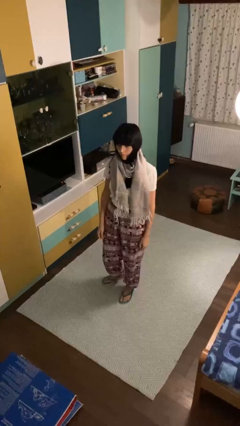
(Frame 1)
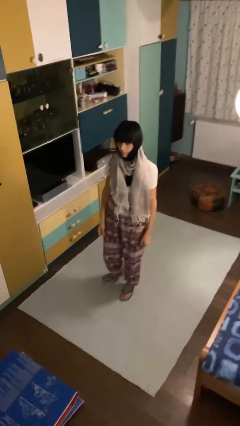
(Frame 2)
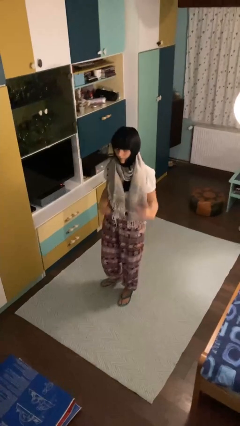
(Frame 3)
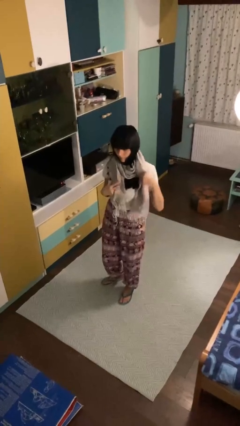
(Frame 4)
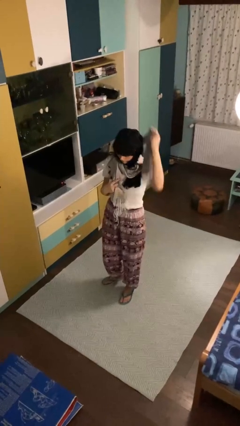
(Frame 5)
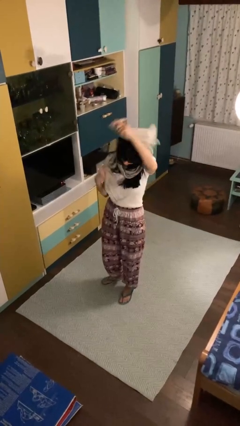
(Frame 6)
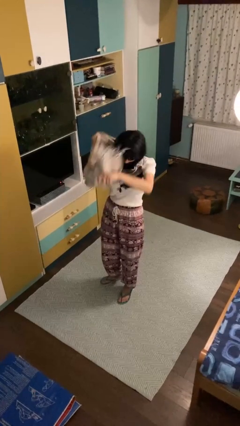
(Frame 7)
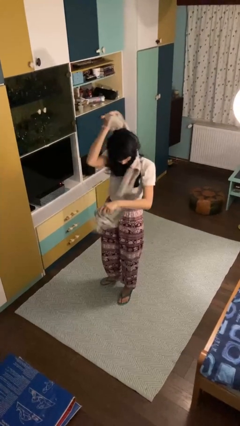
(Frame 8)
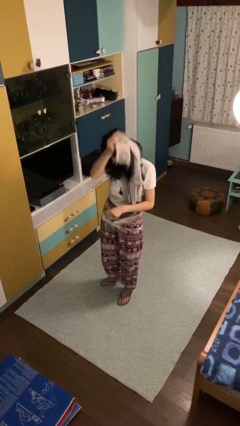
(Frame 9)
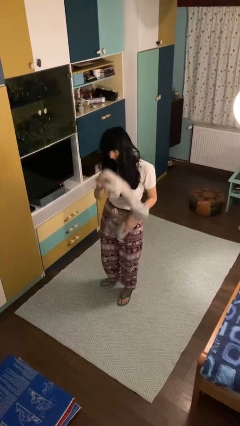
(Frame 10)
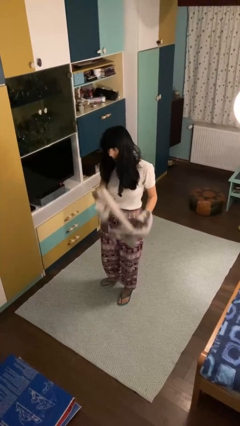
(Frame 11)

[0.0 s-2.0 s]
person takes off scarf

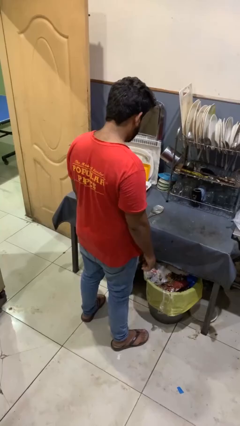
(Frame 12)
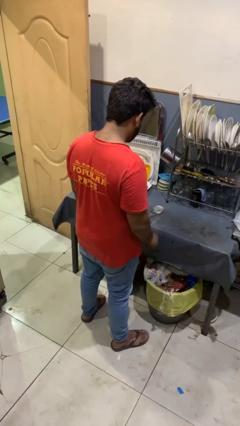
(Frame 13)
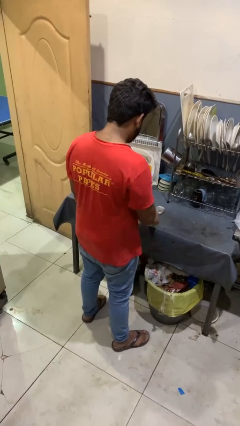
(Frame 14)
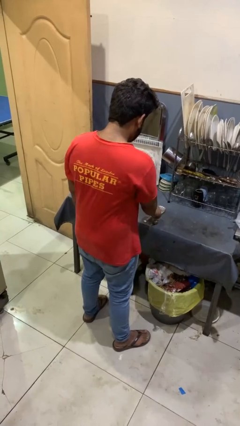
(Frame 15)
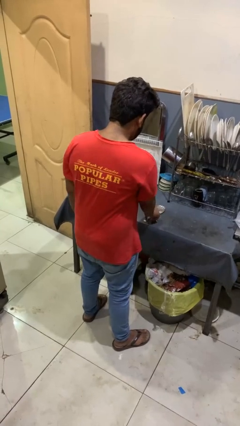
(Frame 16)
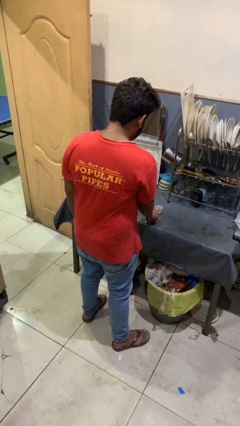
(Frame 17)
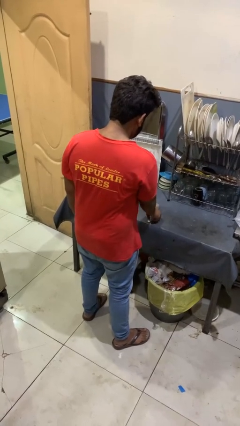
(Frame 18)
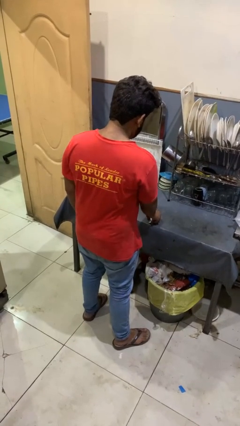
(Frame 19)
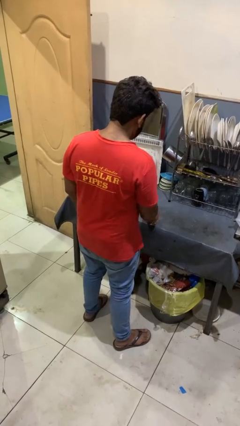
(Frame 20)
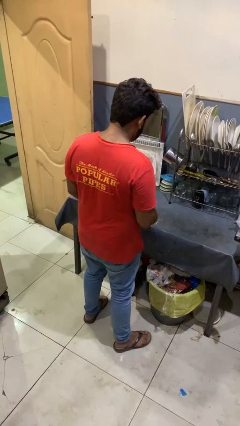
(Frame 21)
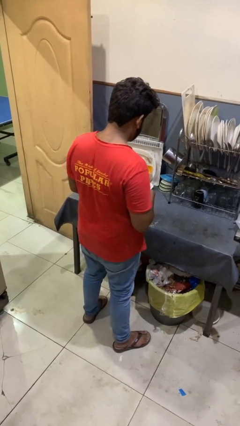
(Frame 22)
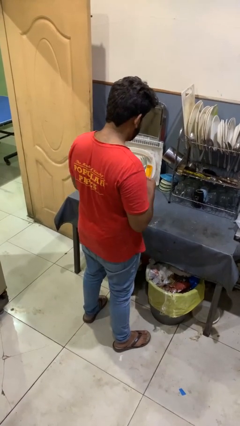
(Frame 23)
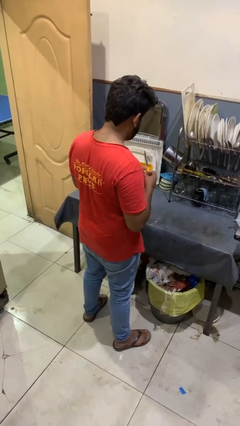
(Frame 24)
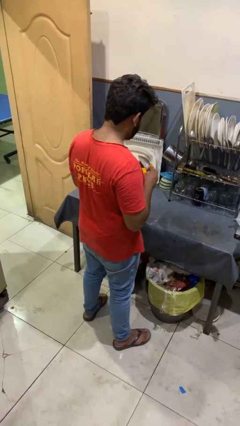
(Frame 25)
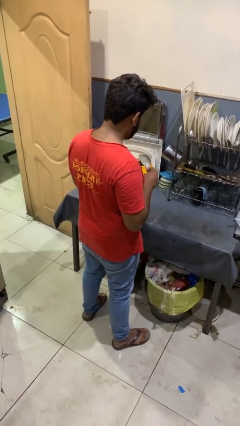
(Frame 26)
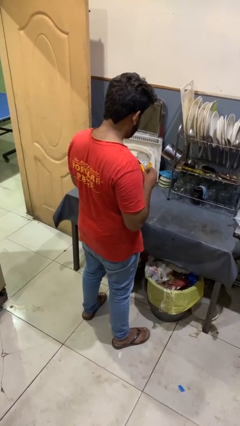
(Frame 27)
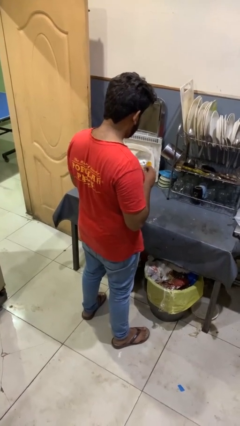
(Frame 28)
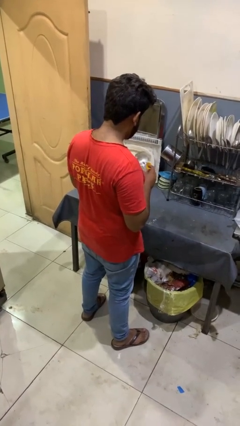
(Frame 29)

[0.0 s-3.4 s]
person picks up object from countertop

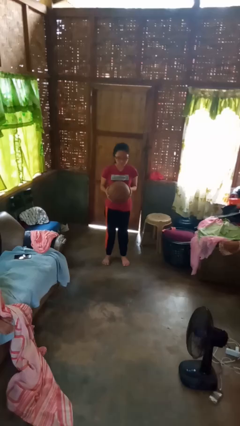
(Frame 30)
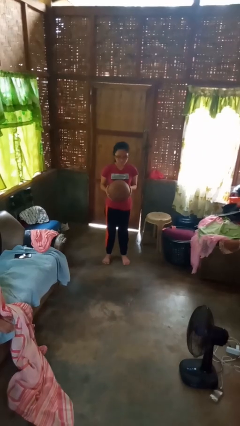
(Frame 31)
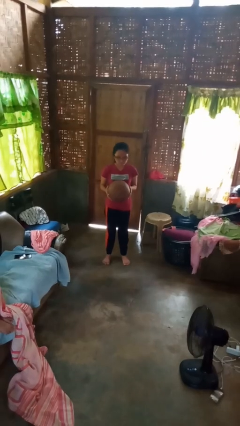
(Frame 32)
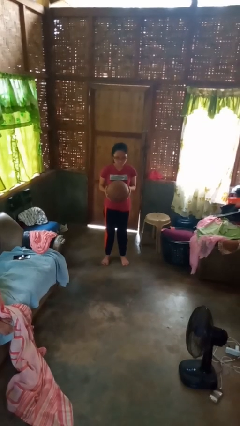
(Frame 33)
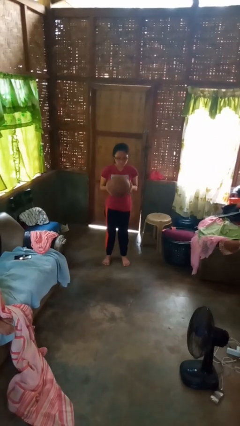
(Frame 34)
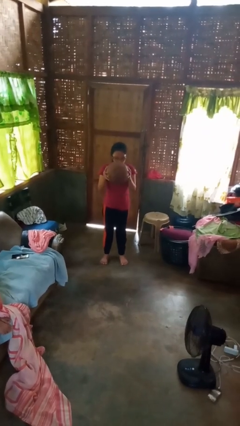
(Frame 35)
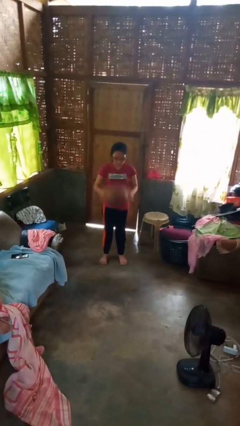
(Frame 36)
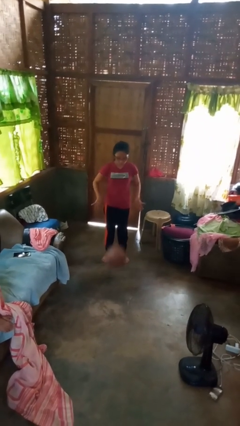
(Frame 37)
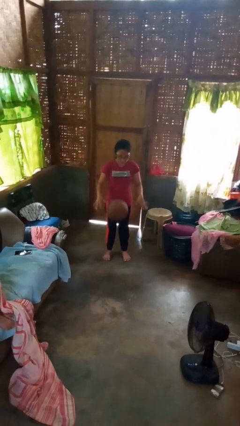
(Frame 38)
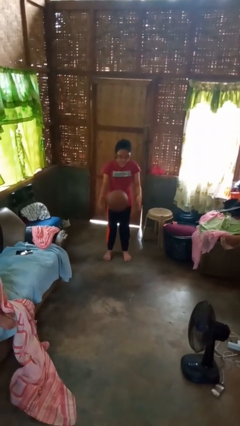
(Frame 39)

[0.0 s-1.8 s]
person bounces ball on floor

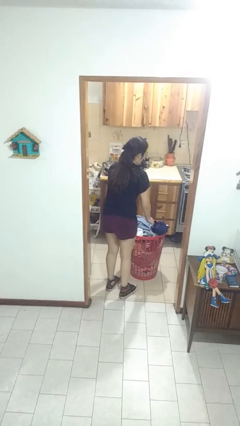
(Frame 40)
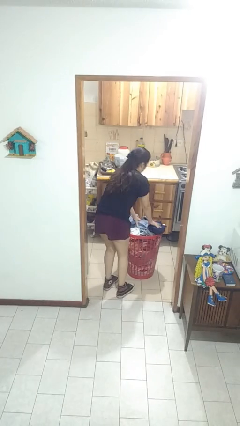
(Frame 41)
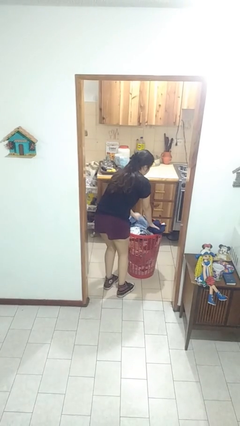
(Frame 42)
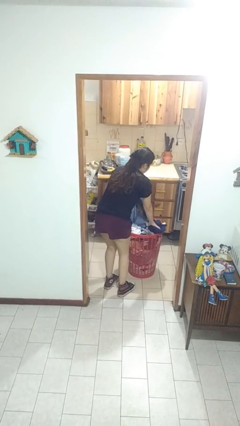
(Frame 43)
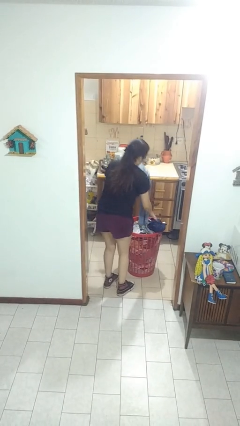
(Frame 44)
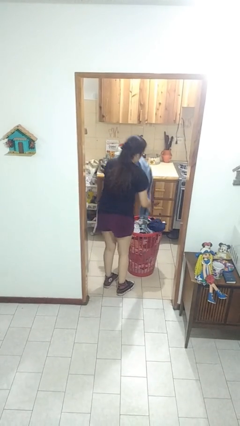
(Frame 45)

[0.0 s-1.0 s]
person takes object from basket

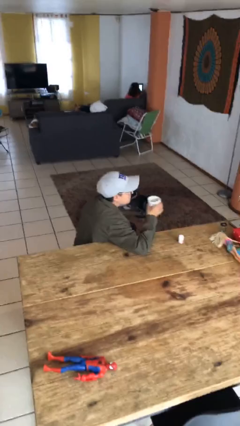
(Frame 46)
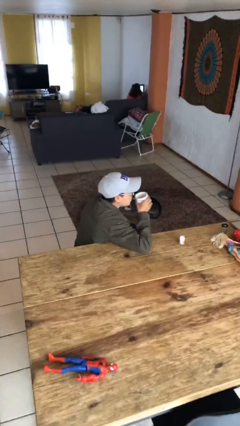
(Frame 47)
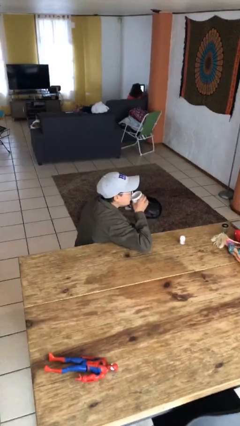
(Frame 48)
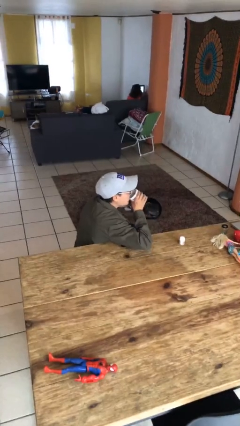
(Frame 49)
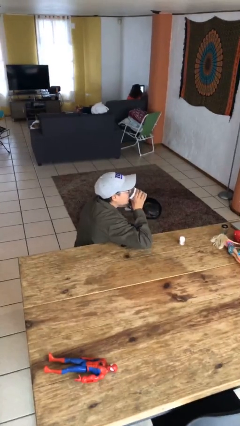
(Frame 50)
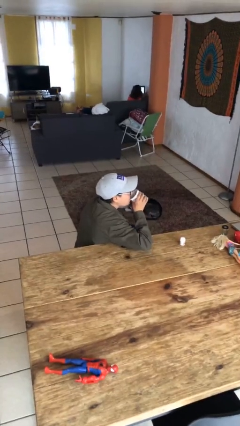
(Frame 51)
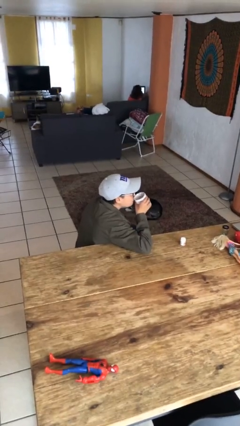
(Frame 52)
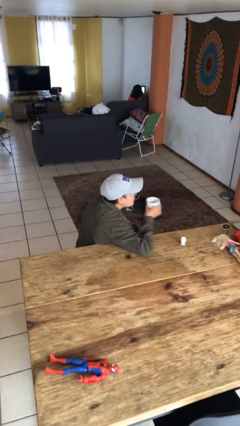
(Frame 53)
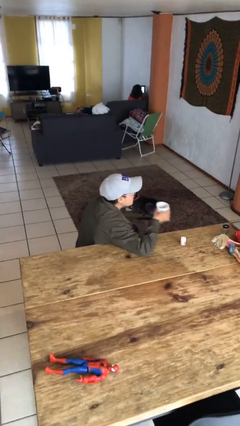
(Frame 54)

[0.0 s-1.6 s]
person drinks from cup

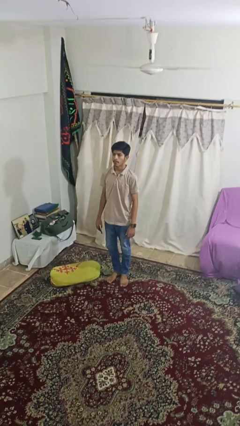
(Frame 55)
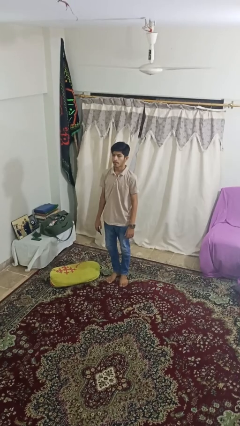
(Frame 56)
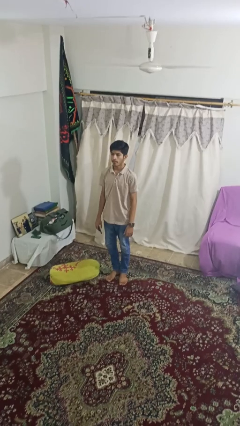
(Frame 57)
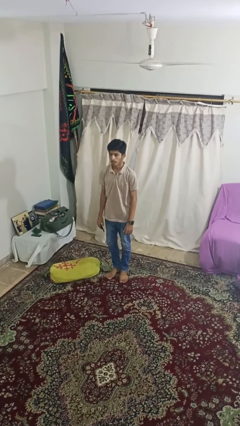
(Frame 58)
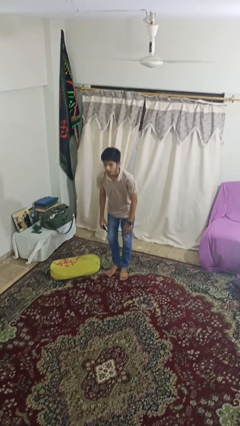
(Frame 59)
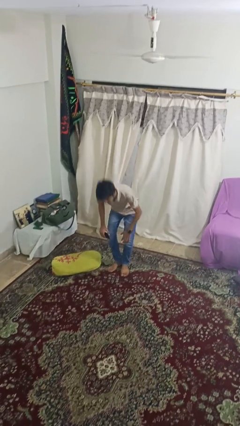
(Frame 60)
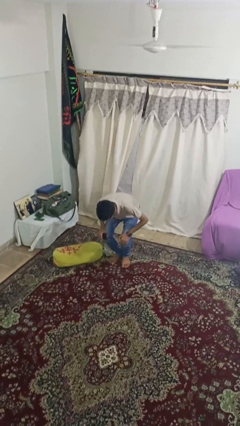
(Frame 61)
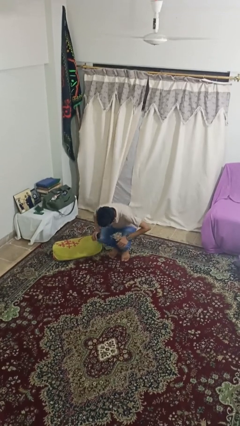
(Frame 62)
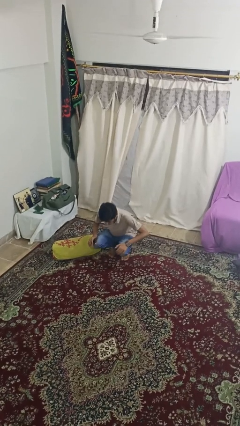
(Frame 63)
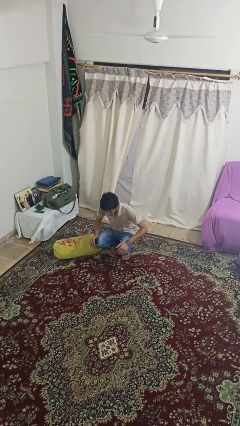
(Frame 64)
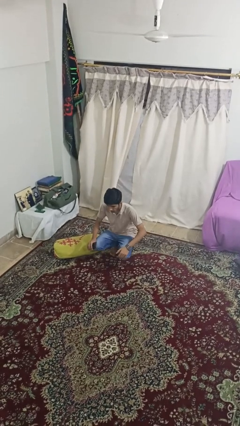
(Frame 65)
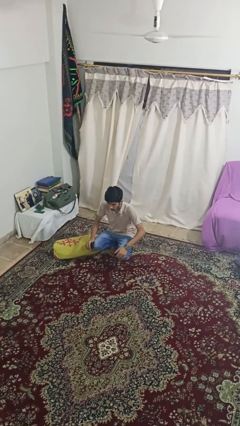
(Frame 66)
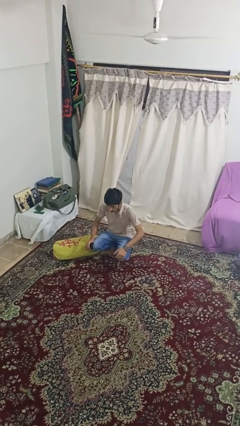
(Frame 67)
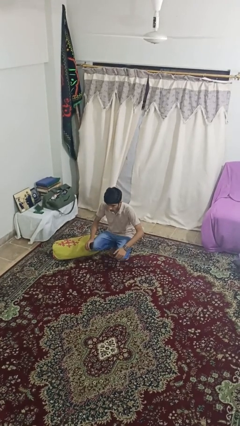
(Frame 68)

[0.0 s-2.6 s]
person squats

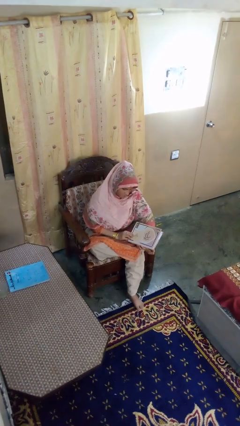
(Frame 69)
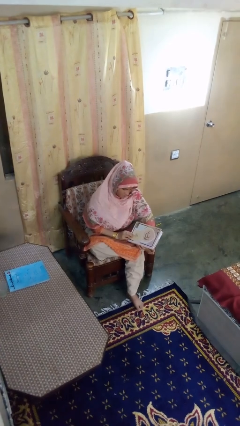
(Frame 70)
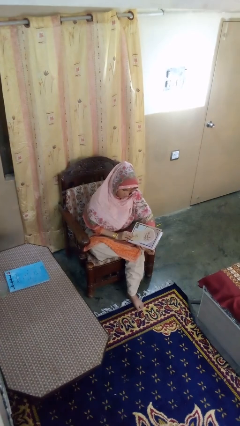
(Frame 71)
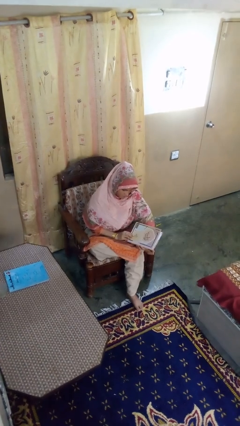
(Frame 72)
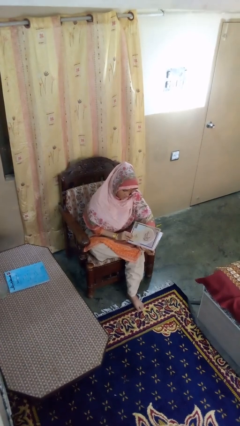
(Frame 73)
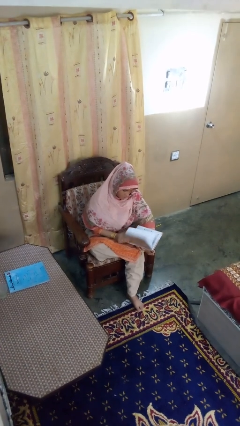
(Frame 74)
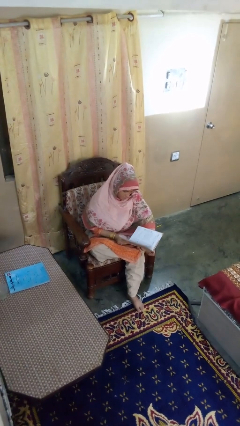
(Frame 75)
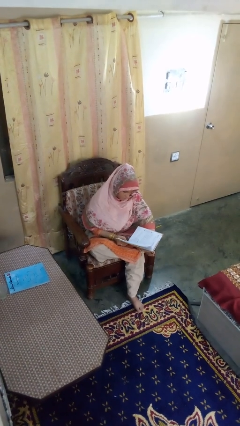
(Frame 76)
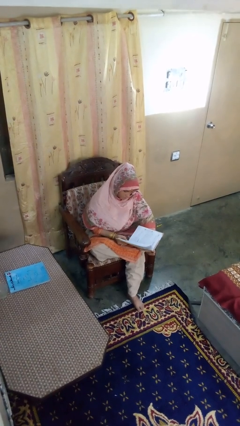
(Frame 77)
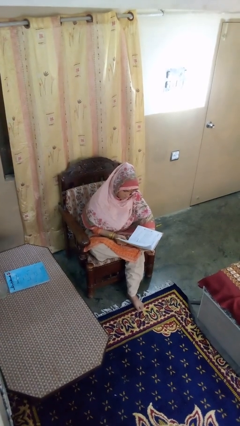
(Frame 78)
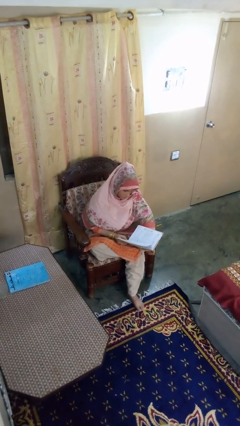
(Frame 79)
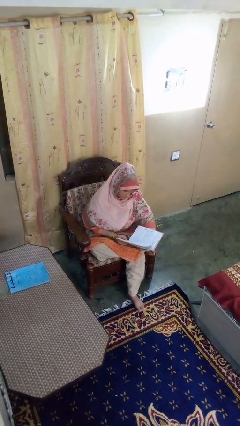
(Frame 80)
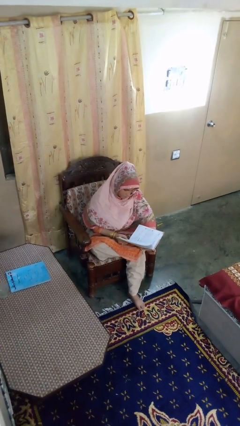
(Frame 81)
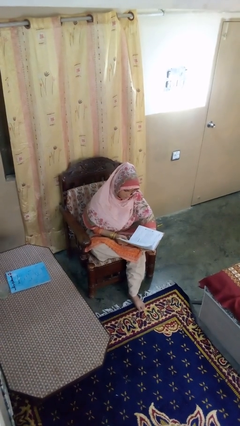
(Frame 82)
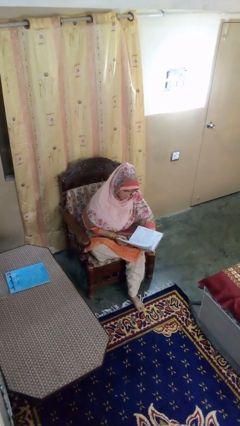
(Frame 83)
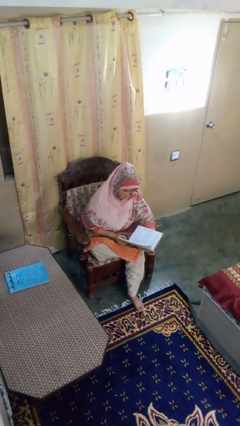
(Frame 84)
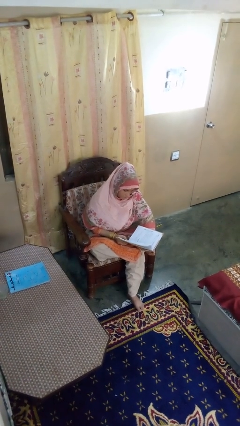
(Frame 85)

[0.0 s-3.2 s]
person reads book

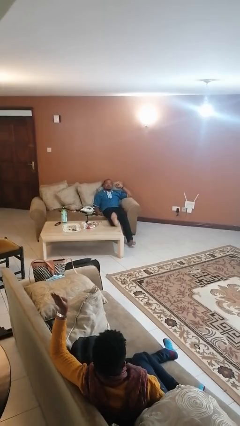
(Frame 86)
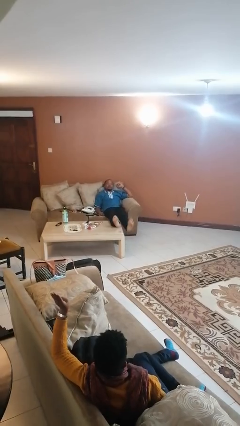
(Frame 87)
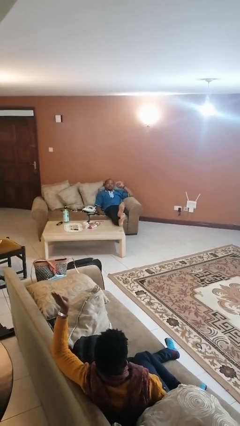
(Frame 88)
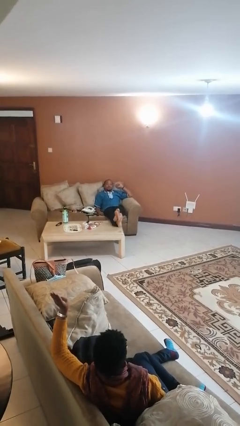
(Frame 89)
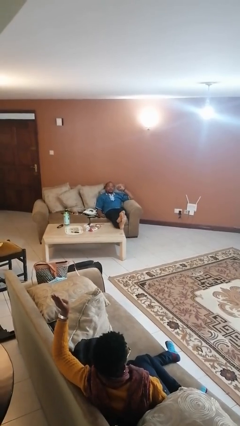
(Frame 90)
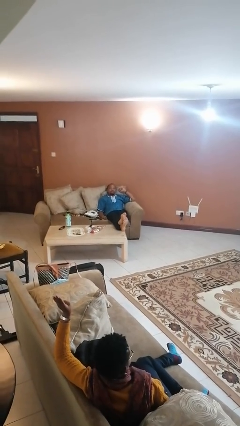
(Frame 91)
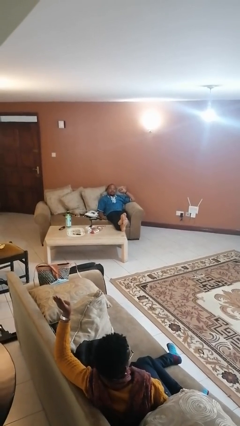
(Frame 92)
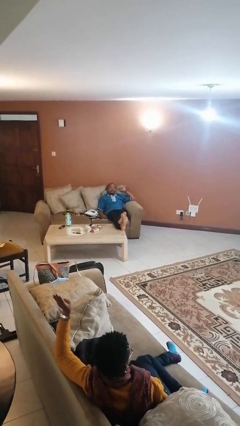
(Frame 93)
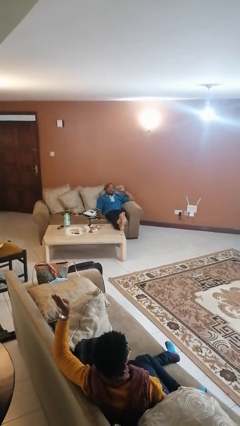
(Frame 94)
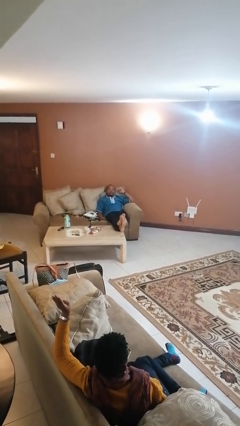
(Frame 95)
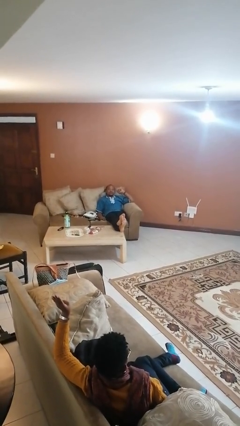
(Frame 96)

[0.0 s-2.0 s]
person puts feet up
